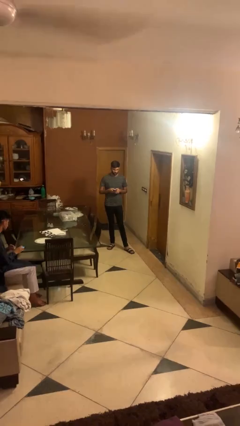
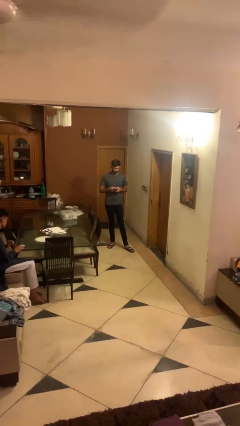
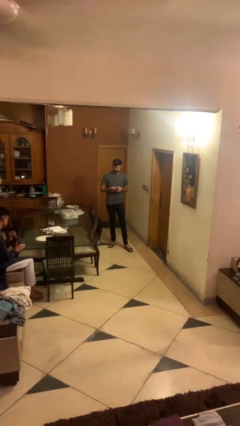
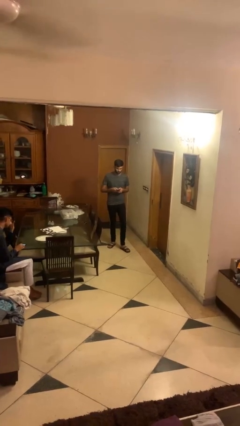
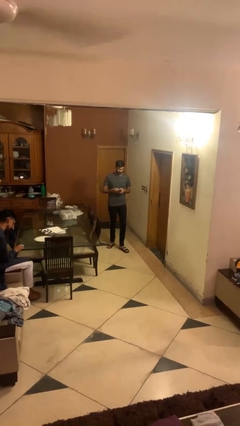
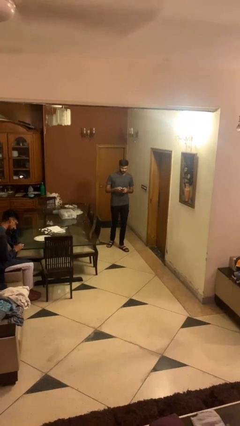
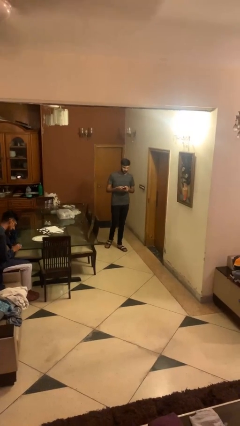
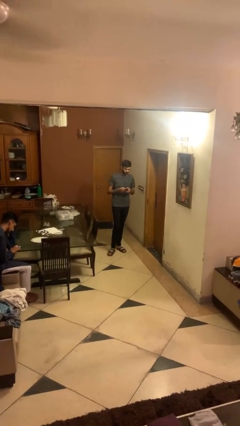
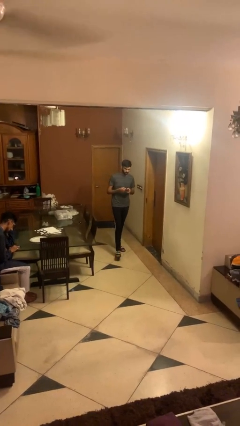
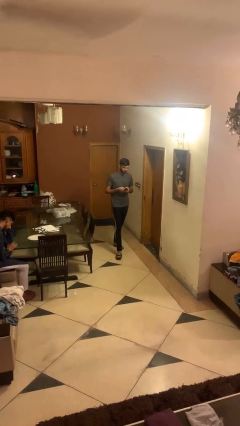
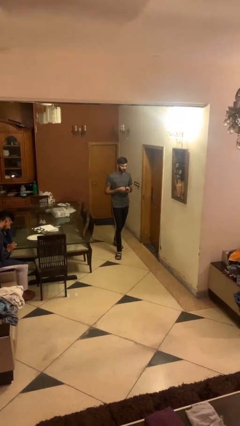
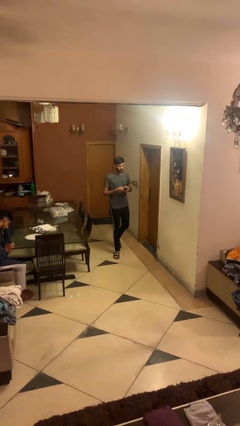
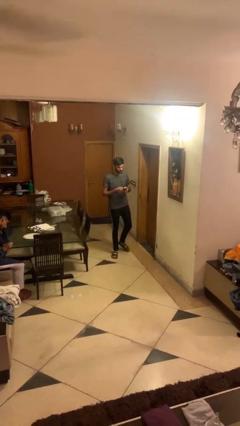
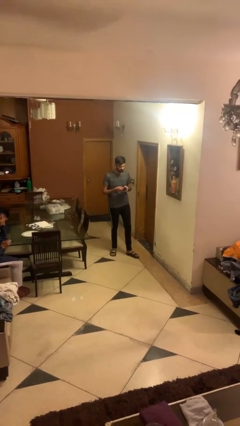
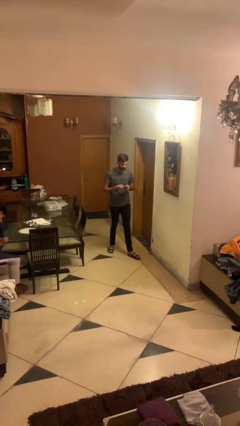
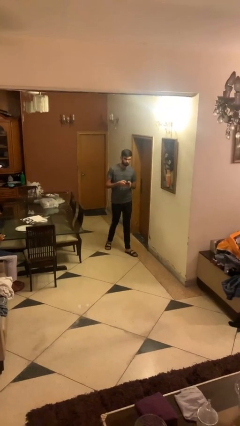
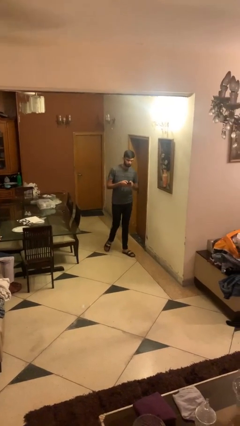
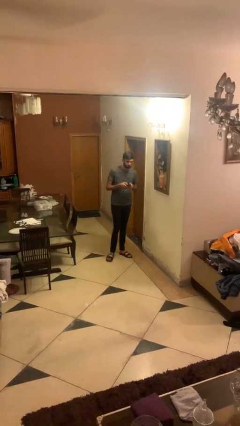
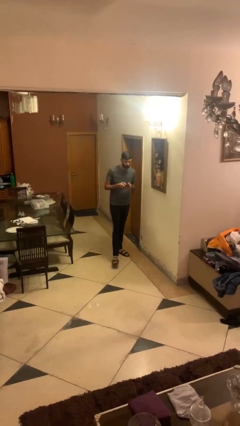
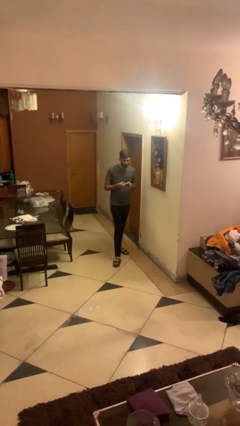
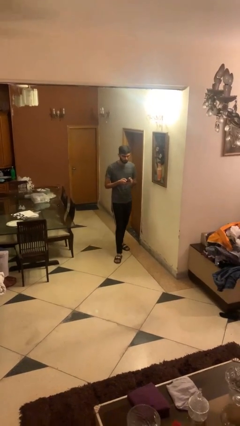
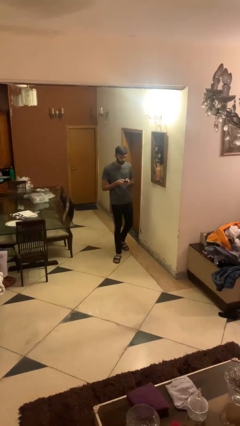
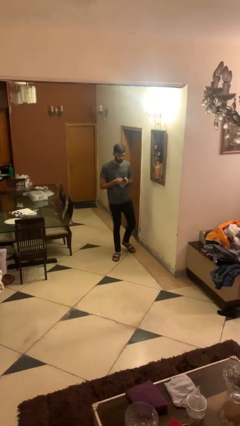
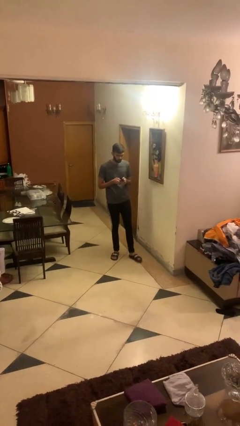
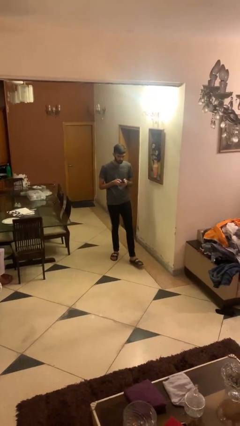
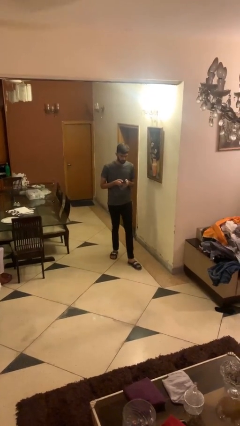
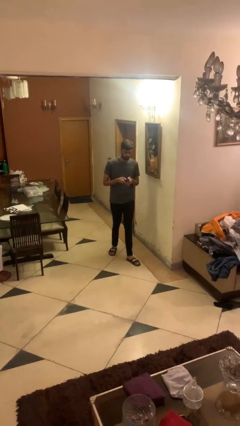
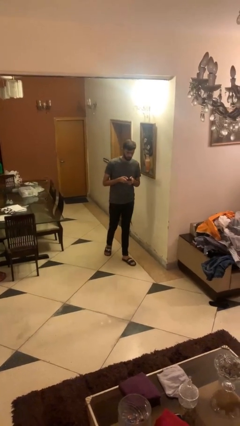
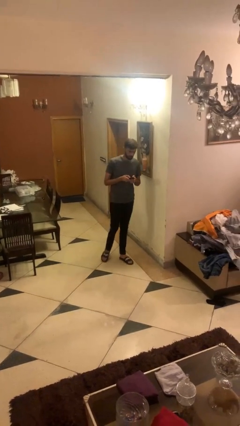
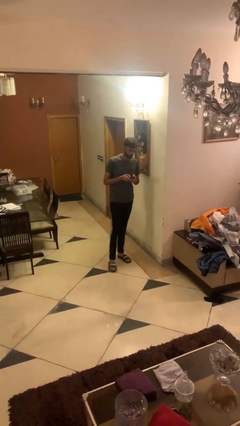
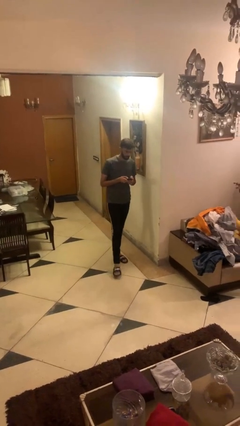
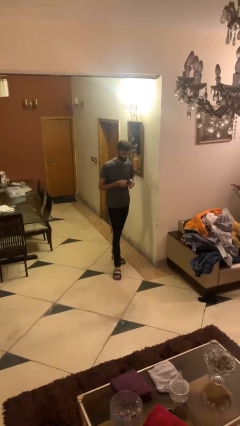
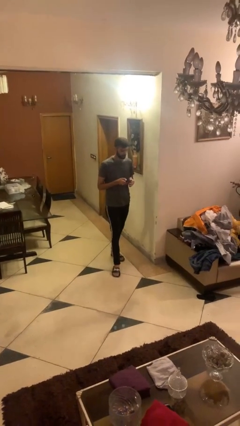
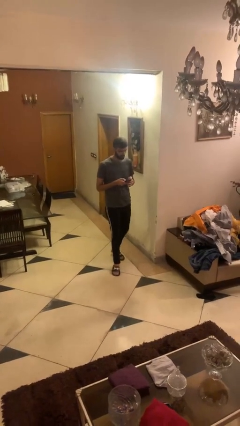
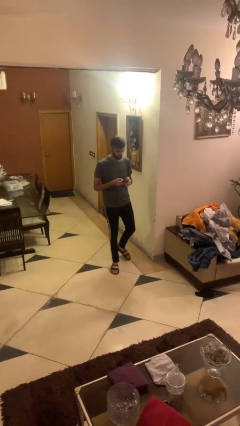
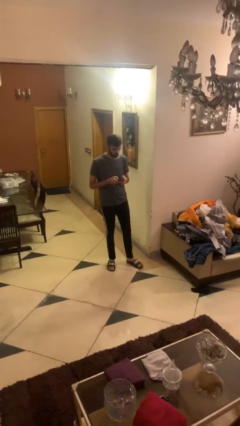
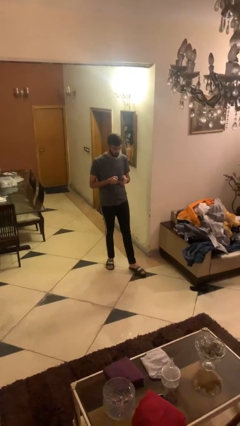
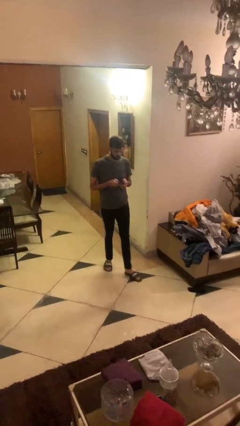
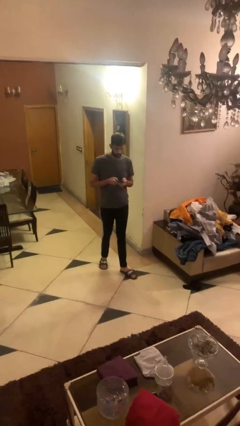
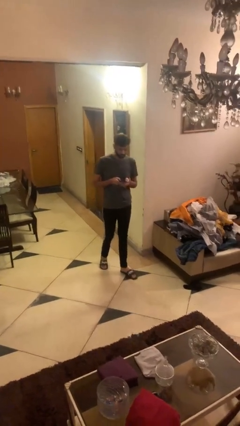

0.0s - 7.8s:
person texts on phone

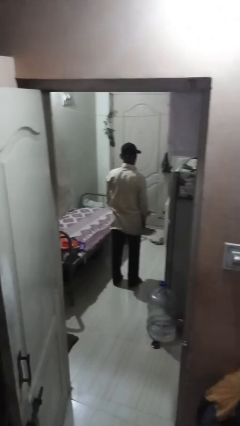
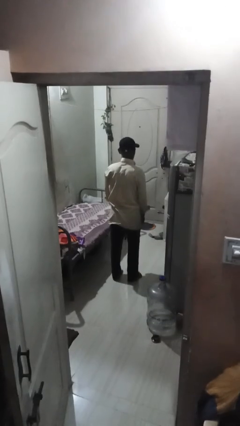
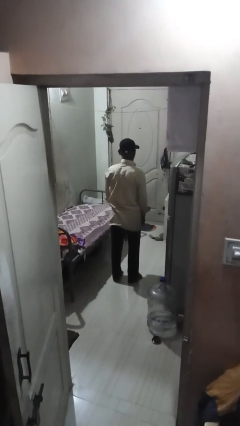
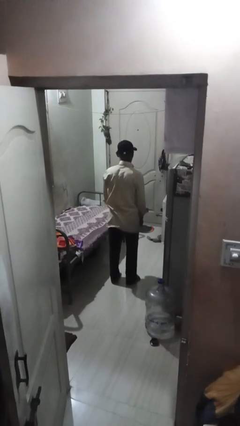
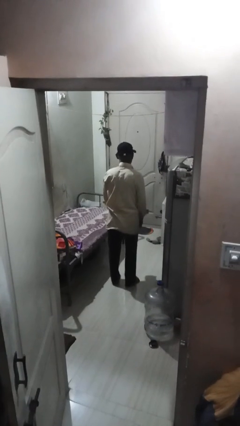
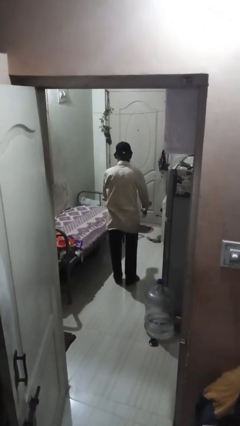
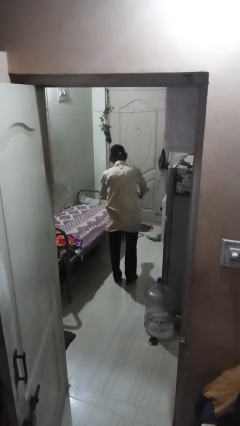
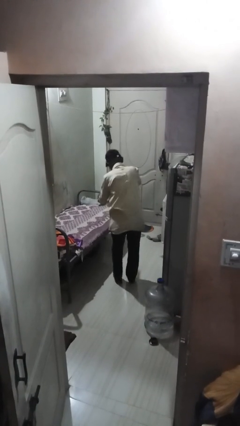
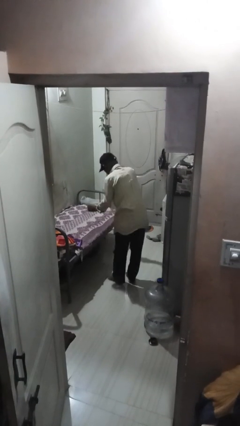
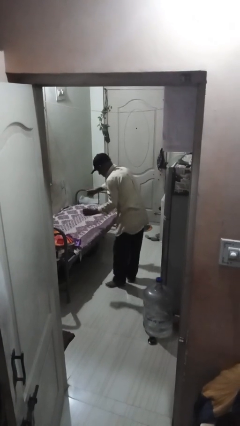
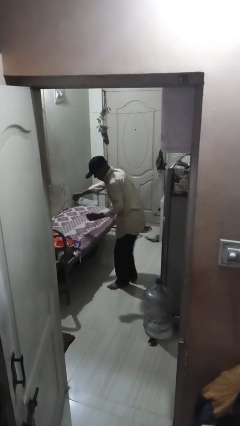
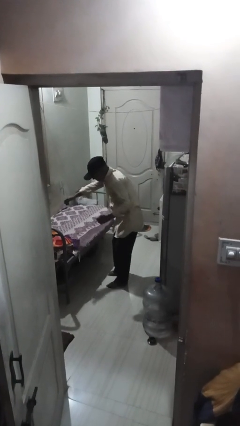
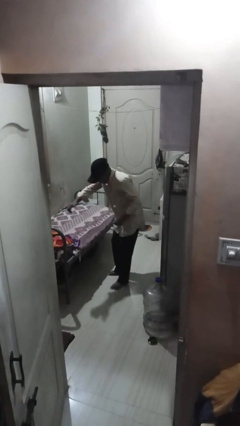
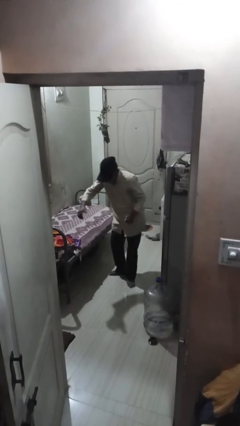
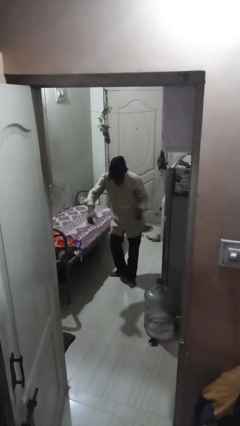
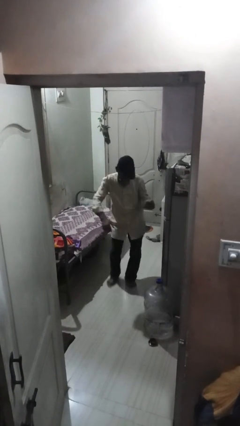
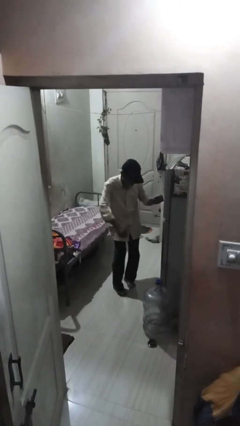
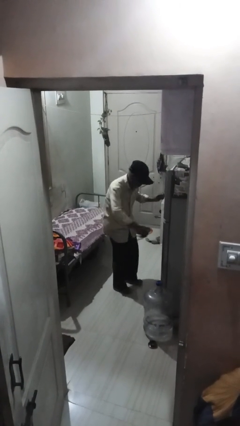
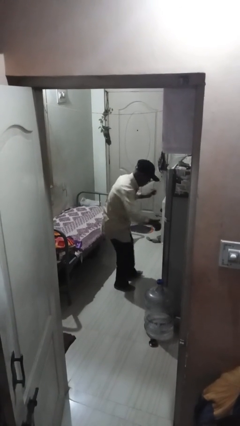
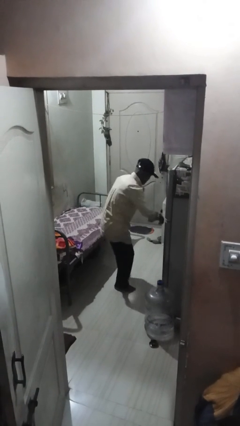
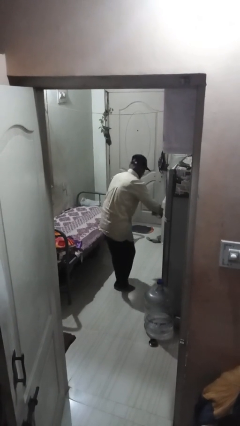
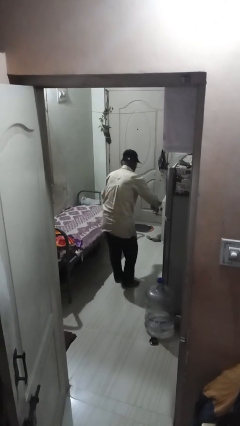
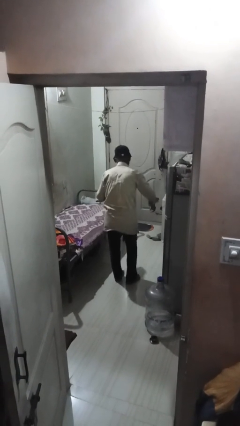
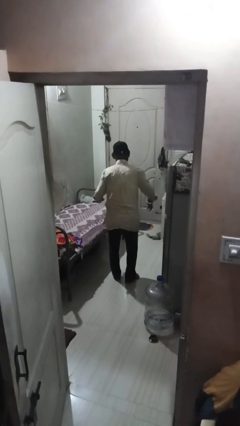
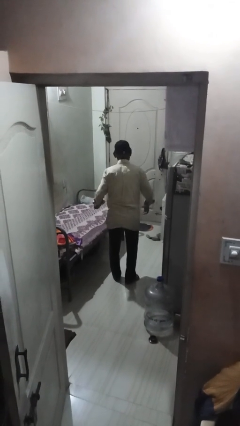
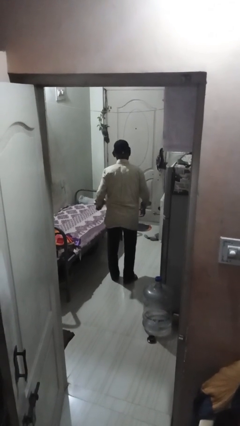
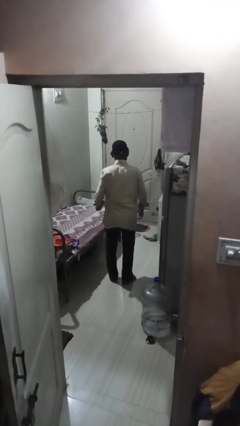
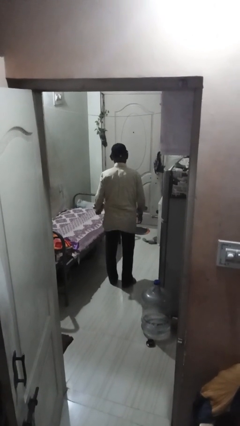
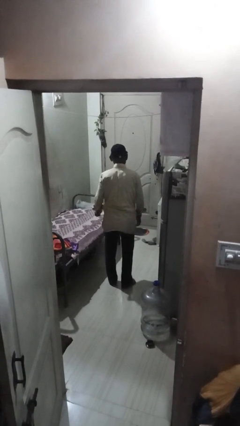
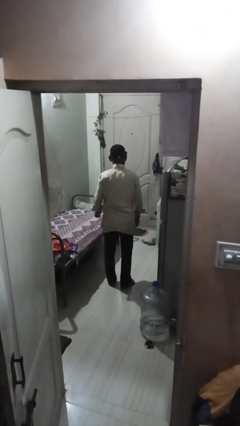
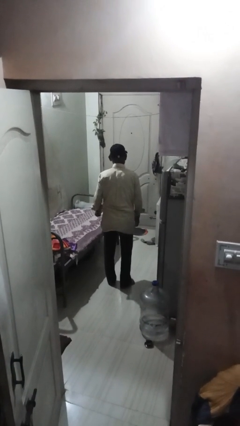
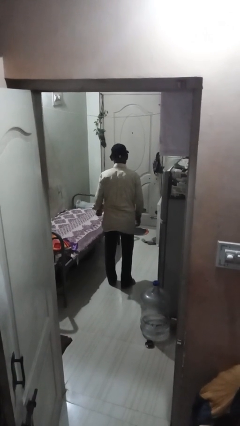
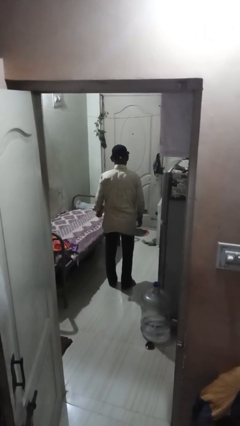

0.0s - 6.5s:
person twirls

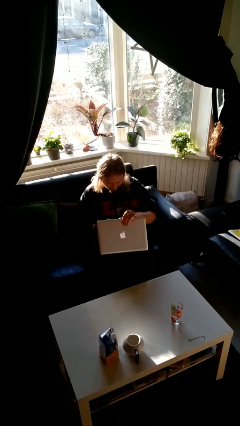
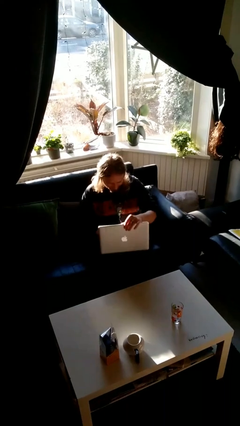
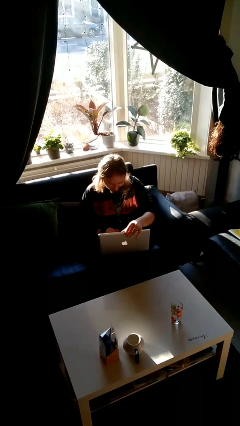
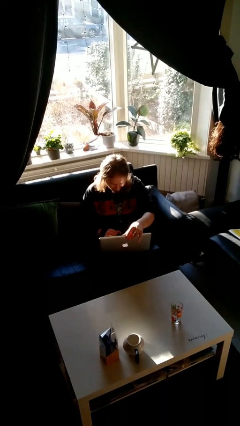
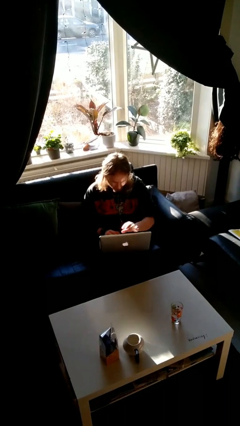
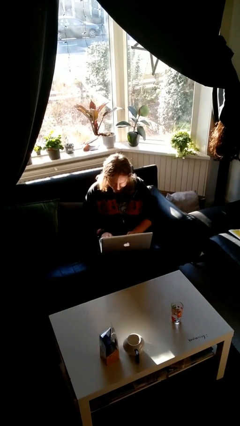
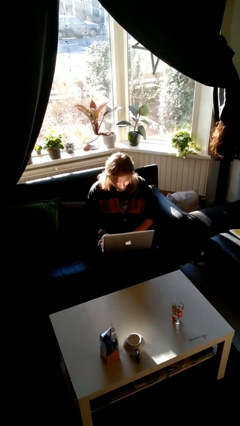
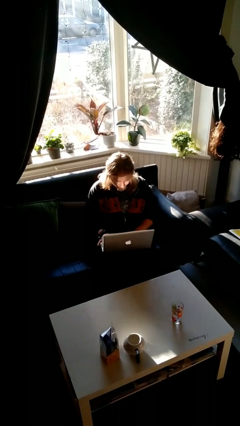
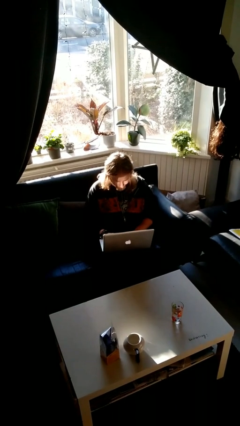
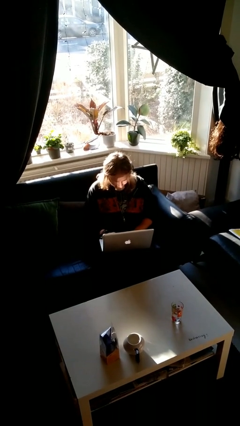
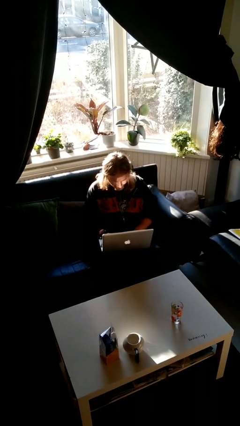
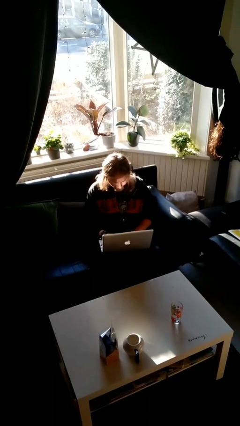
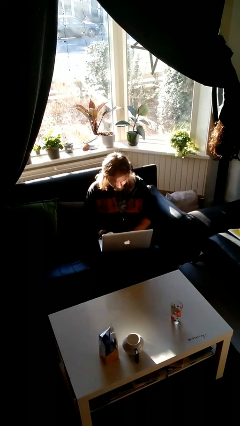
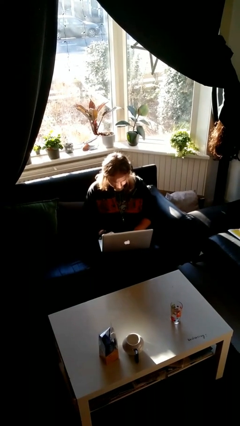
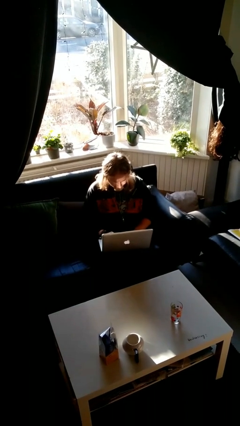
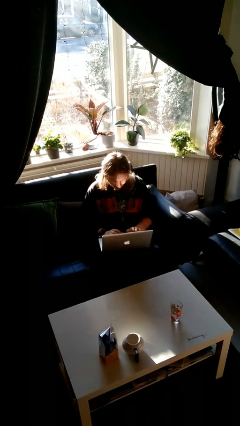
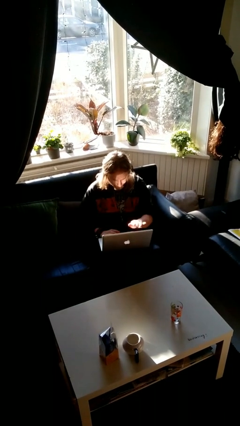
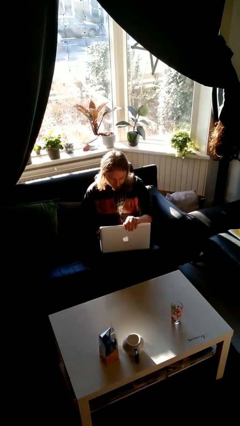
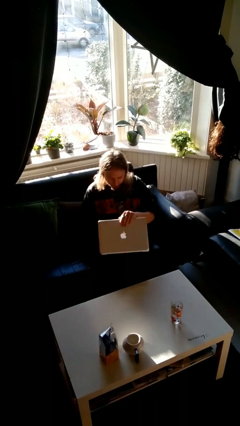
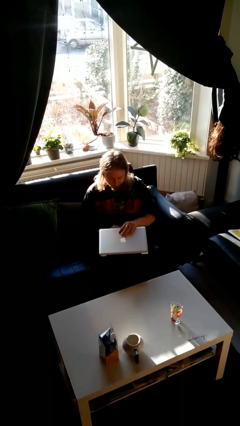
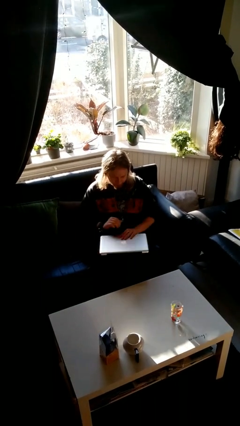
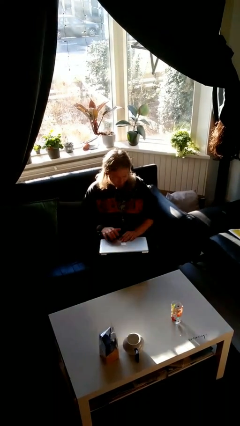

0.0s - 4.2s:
person interacts with laptop
